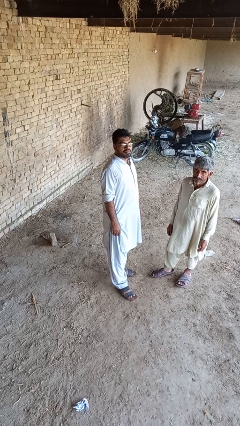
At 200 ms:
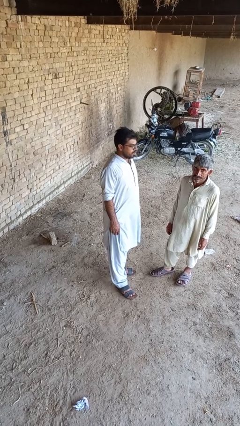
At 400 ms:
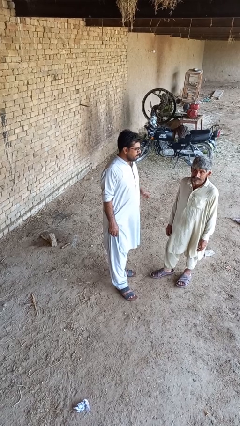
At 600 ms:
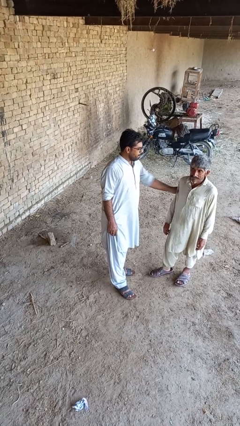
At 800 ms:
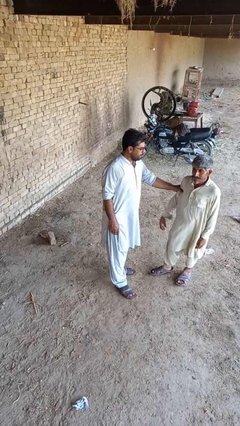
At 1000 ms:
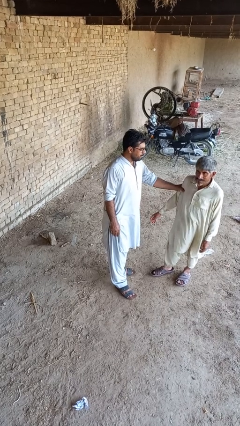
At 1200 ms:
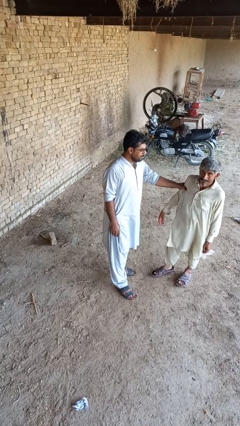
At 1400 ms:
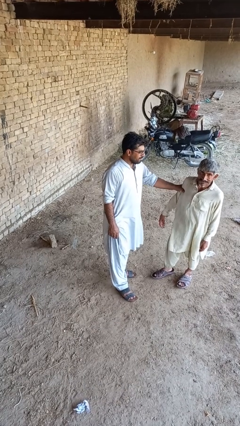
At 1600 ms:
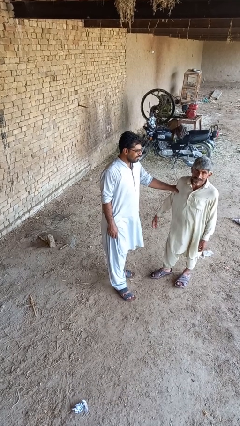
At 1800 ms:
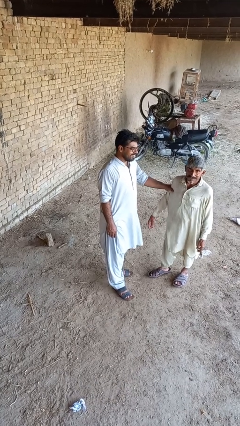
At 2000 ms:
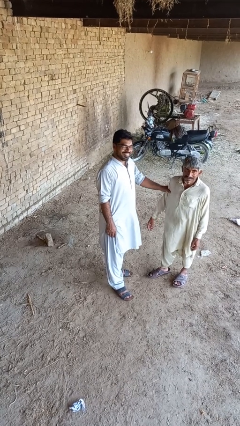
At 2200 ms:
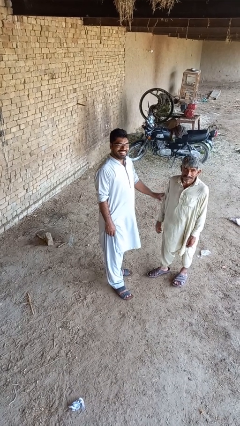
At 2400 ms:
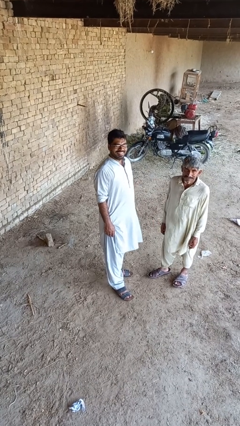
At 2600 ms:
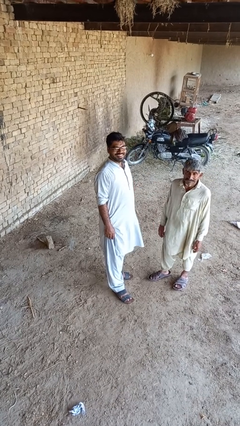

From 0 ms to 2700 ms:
person grabs person by bicep

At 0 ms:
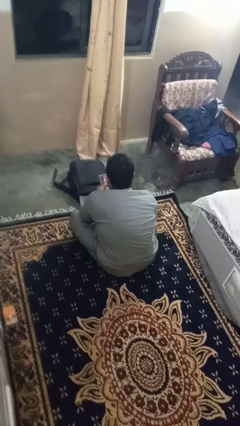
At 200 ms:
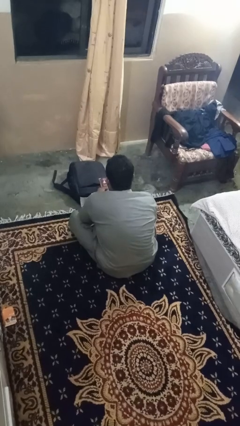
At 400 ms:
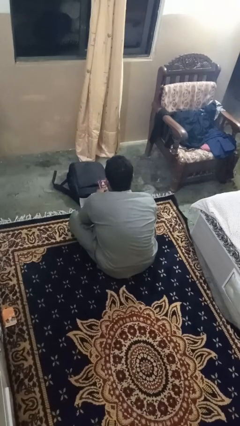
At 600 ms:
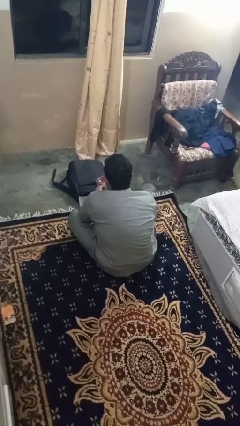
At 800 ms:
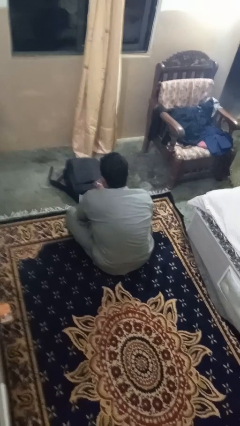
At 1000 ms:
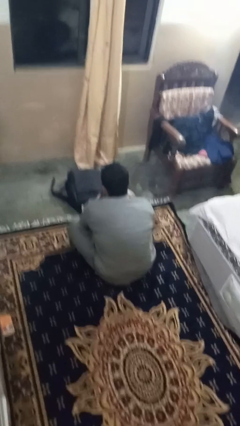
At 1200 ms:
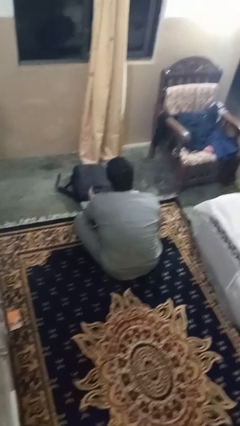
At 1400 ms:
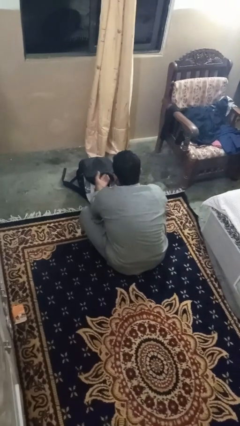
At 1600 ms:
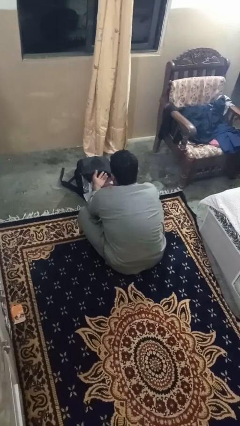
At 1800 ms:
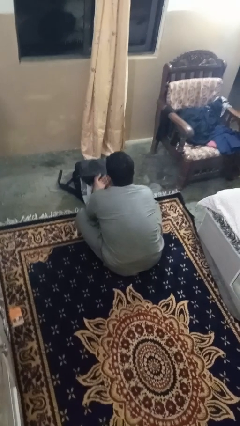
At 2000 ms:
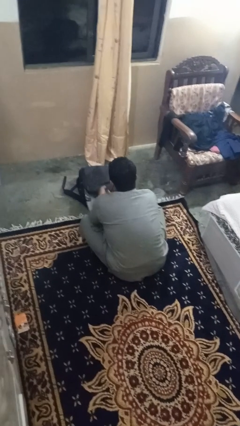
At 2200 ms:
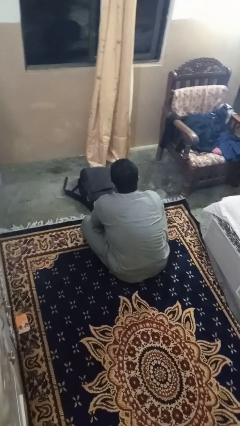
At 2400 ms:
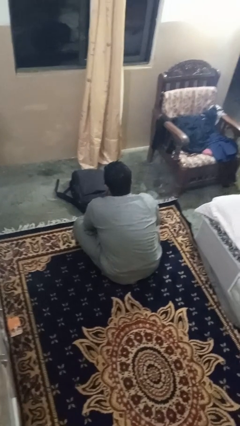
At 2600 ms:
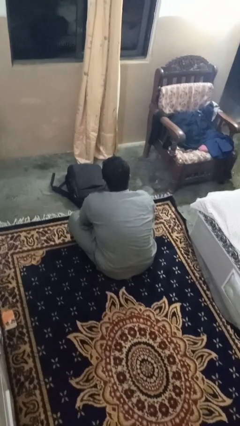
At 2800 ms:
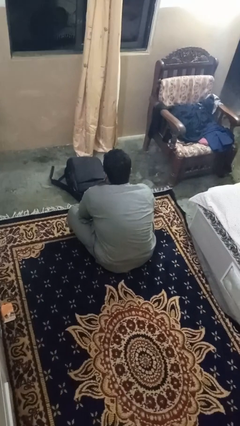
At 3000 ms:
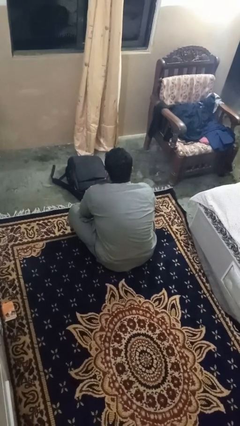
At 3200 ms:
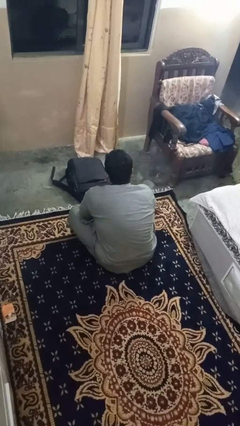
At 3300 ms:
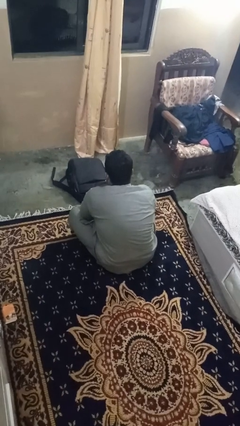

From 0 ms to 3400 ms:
person puts object into bag

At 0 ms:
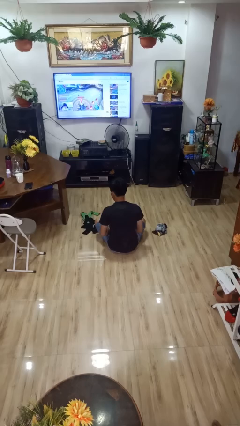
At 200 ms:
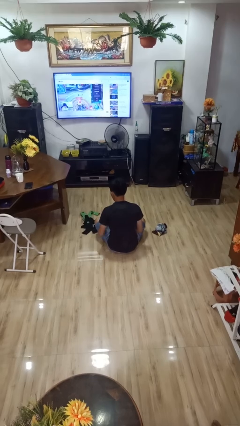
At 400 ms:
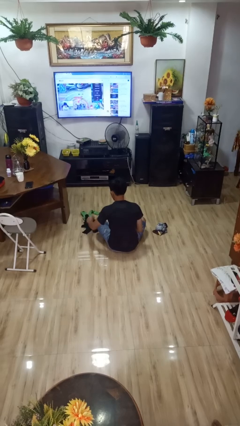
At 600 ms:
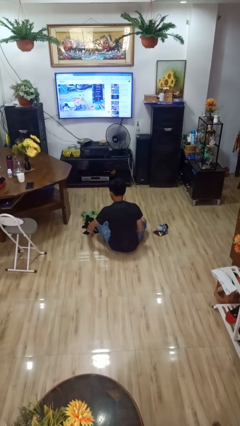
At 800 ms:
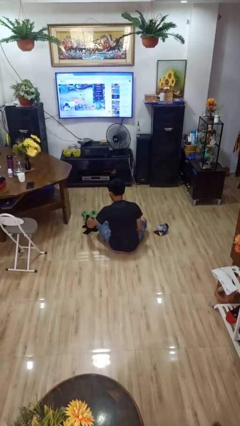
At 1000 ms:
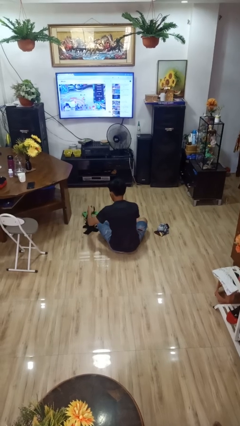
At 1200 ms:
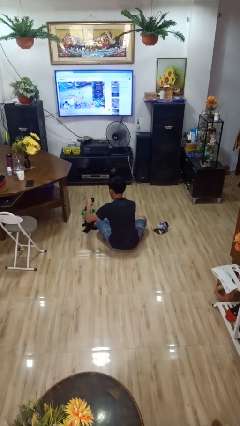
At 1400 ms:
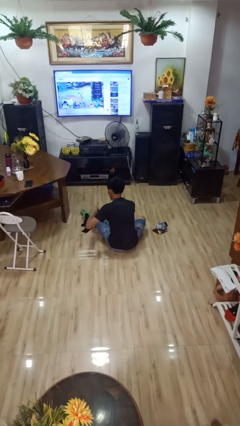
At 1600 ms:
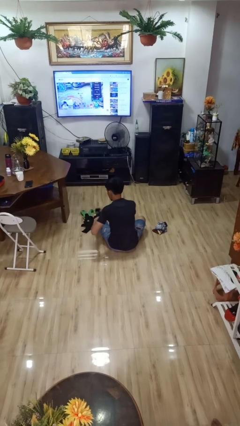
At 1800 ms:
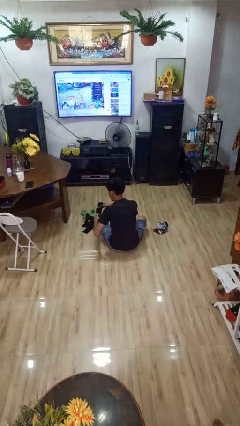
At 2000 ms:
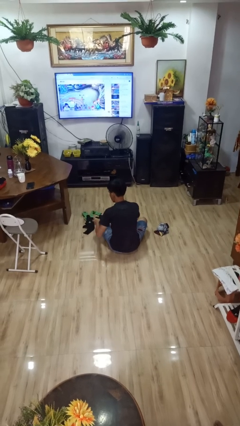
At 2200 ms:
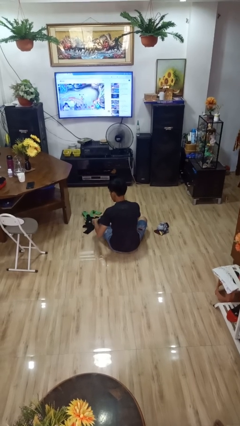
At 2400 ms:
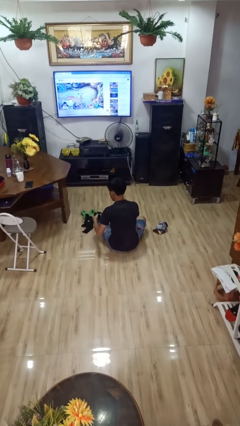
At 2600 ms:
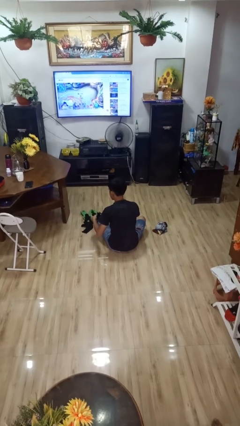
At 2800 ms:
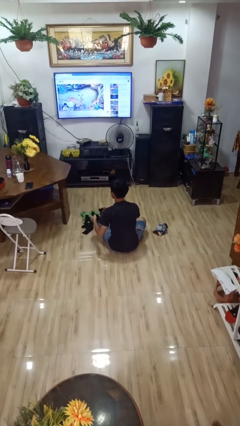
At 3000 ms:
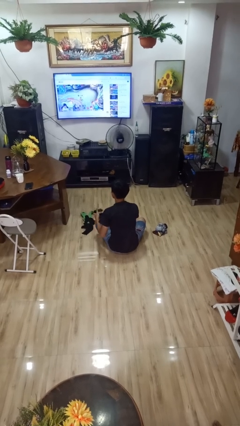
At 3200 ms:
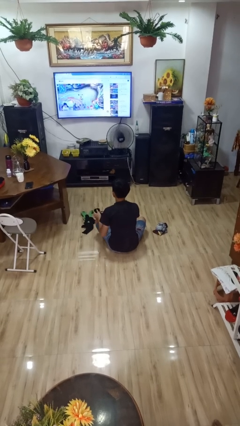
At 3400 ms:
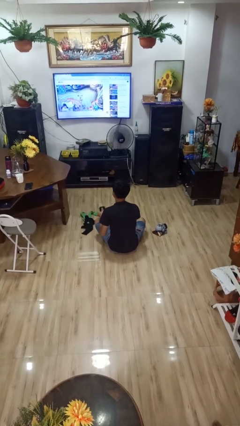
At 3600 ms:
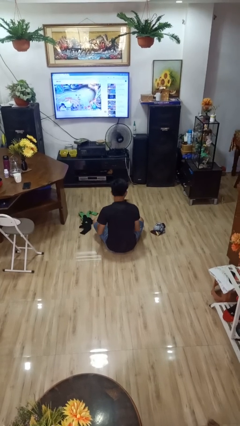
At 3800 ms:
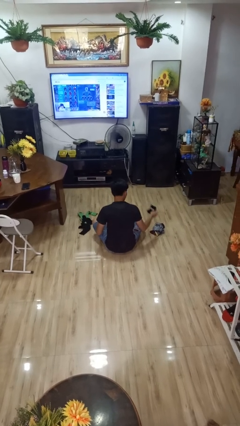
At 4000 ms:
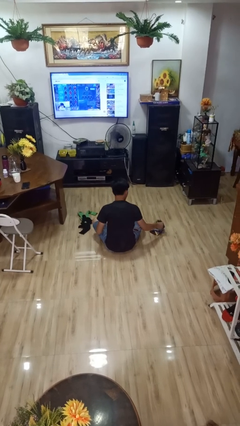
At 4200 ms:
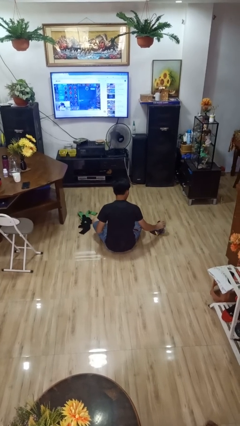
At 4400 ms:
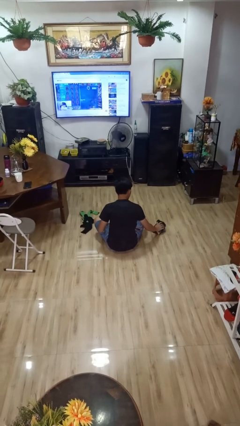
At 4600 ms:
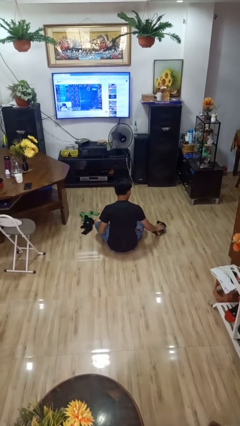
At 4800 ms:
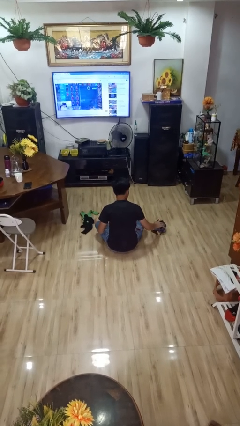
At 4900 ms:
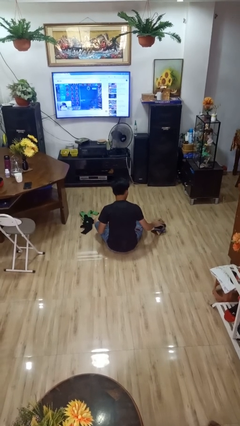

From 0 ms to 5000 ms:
person folds socks

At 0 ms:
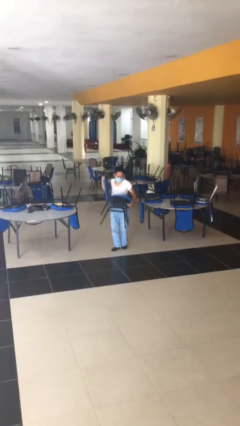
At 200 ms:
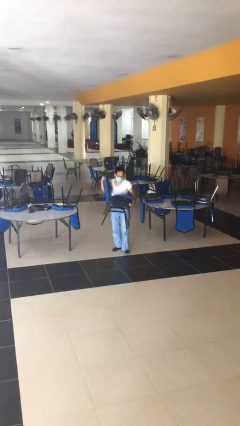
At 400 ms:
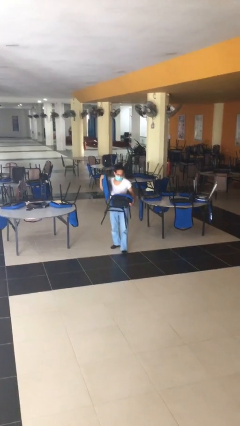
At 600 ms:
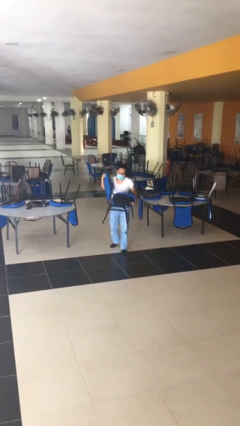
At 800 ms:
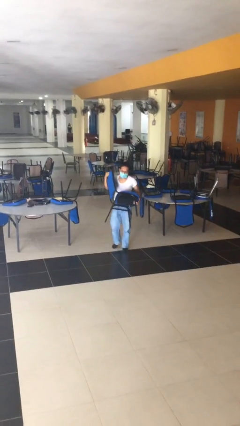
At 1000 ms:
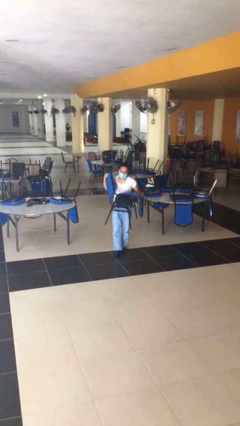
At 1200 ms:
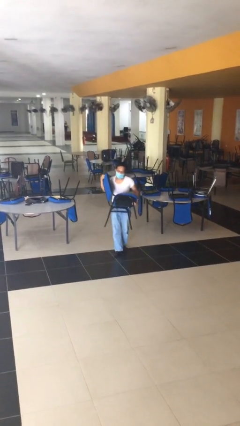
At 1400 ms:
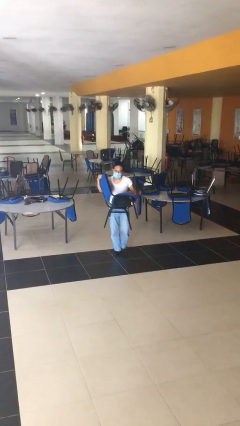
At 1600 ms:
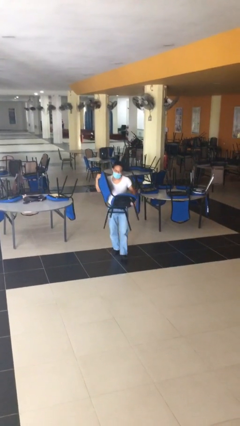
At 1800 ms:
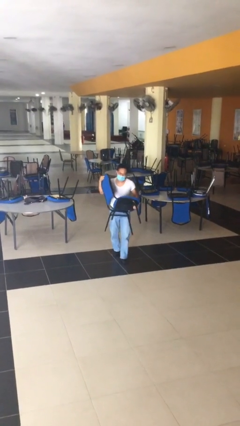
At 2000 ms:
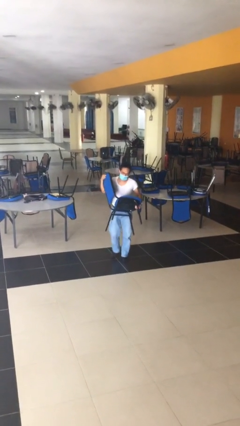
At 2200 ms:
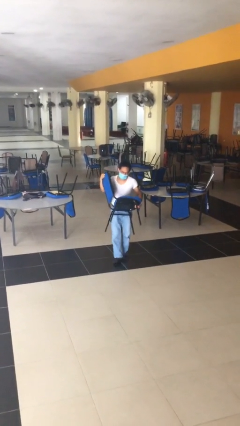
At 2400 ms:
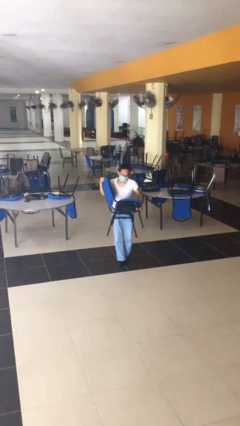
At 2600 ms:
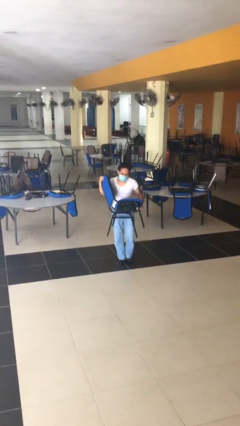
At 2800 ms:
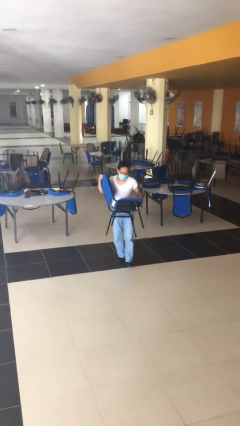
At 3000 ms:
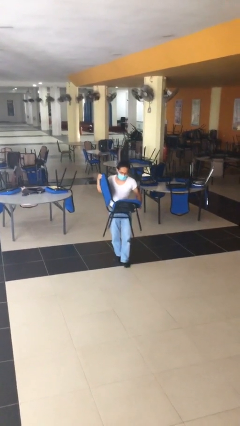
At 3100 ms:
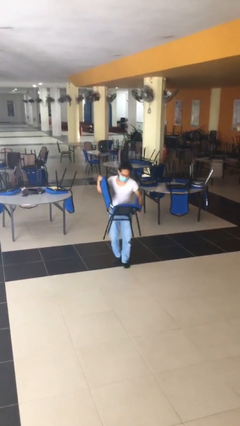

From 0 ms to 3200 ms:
person carries heavy object

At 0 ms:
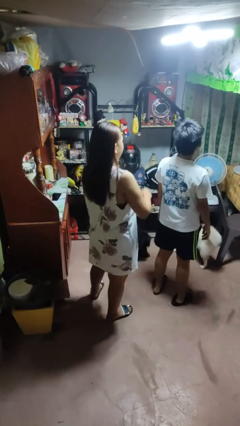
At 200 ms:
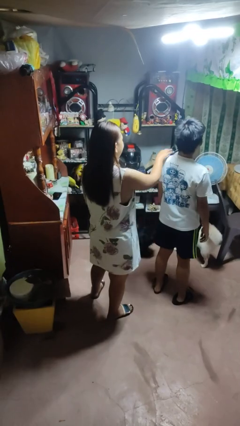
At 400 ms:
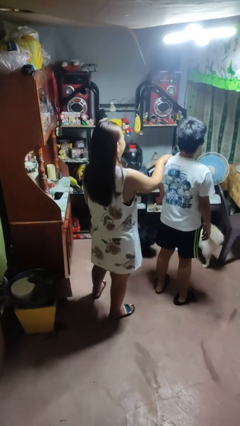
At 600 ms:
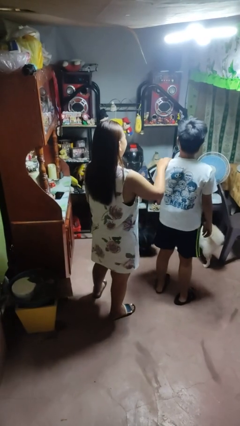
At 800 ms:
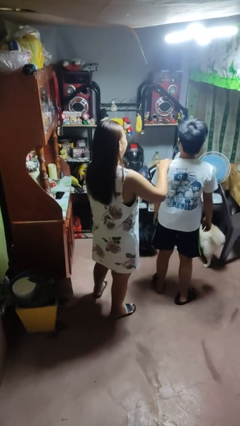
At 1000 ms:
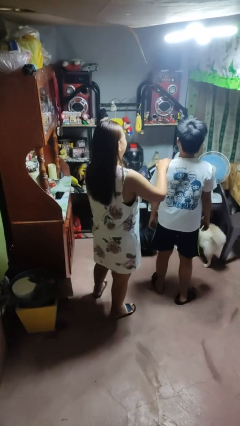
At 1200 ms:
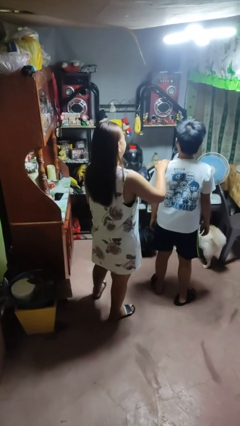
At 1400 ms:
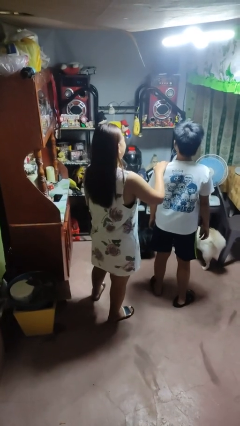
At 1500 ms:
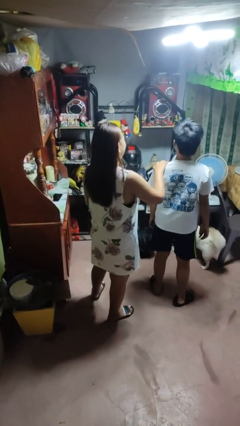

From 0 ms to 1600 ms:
person grabs person by shoulder

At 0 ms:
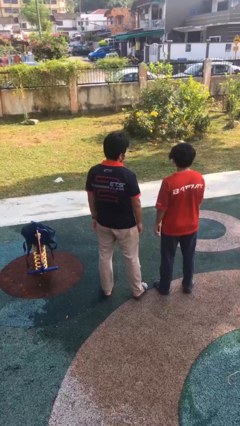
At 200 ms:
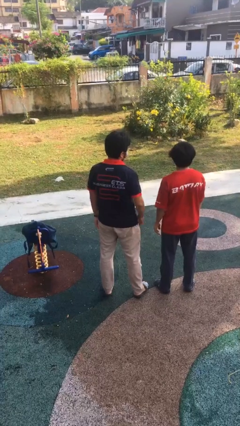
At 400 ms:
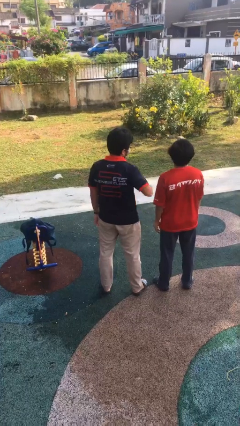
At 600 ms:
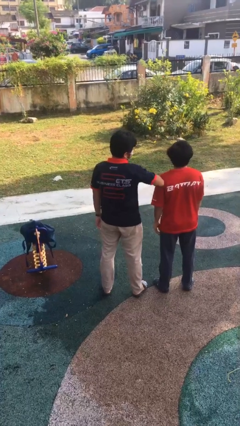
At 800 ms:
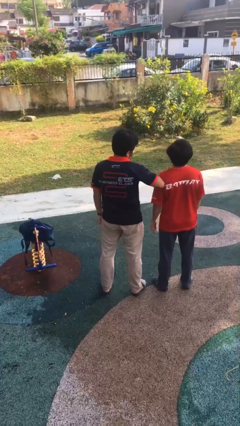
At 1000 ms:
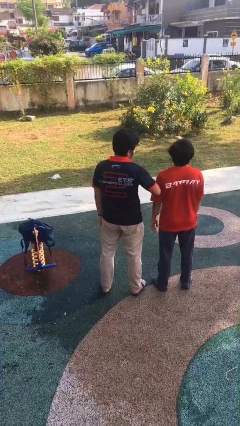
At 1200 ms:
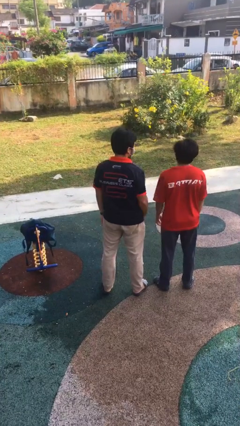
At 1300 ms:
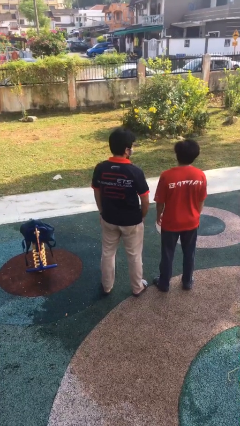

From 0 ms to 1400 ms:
person nudges person with elbow
